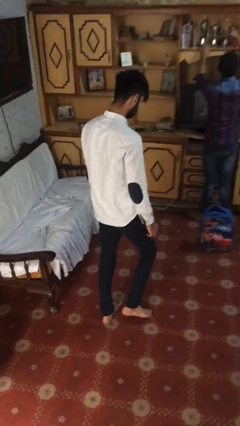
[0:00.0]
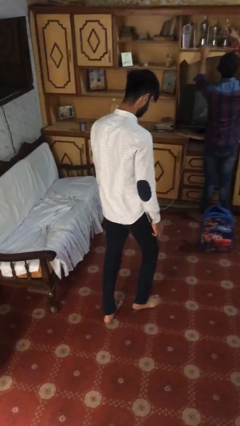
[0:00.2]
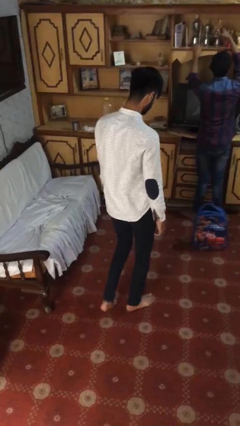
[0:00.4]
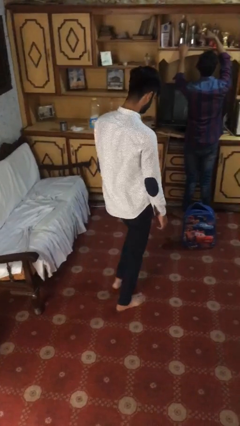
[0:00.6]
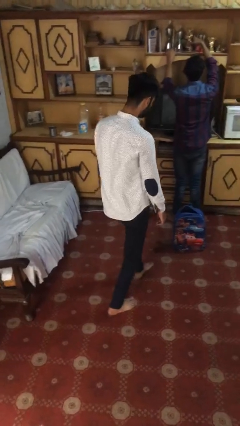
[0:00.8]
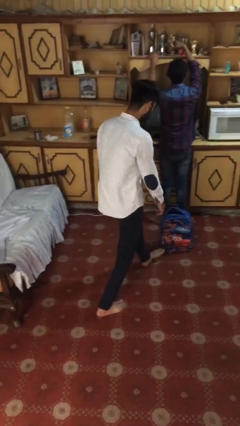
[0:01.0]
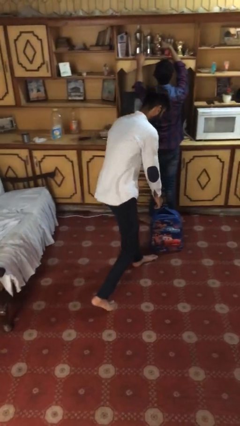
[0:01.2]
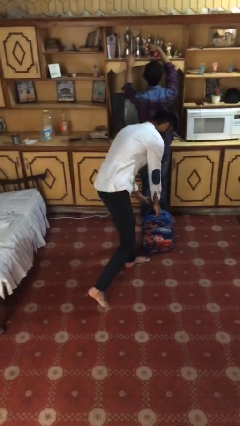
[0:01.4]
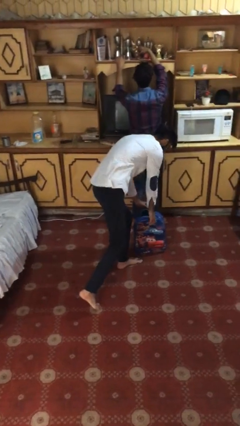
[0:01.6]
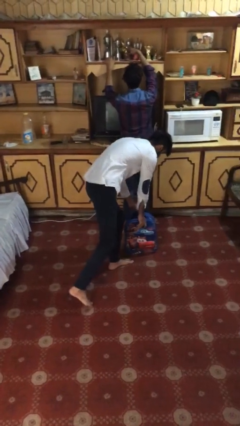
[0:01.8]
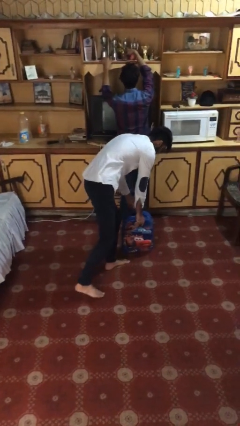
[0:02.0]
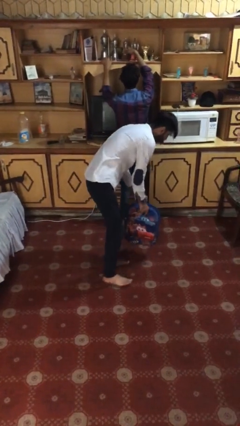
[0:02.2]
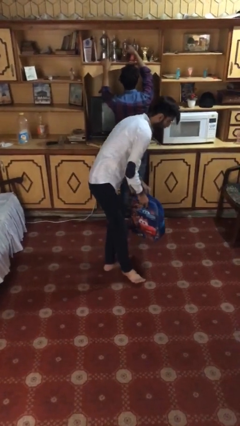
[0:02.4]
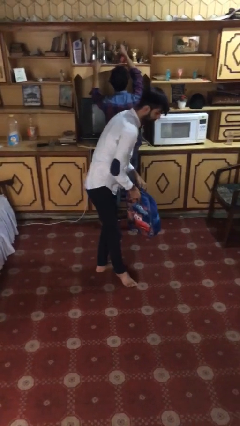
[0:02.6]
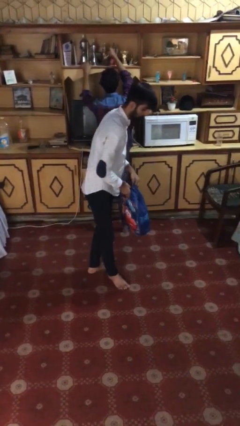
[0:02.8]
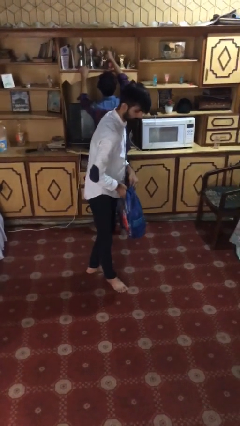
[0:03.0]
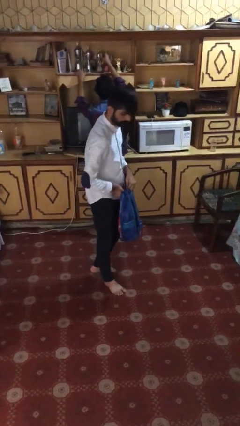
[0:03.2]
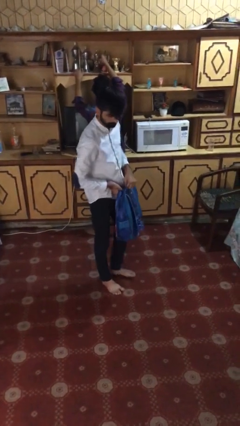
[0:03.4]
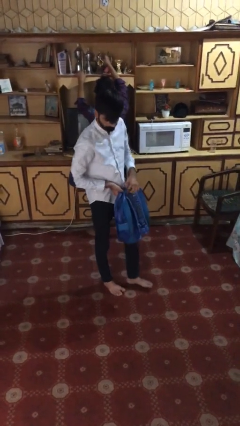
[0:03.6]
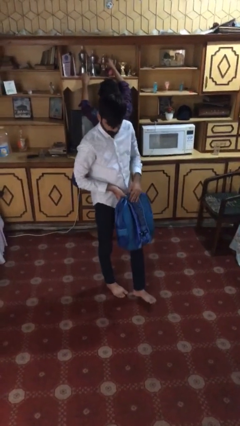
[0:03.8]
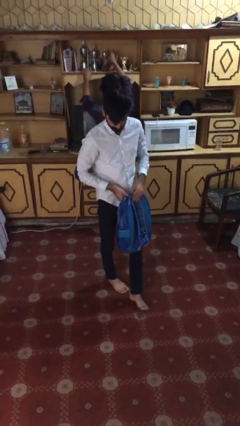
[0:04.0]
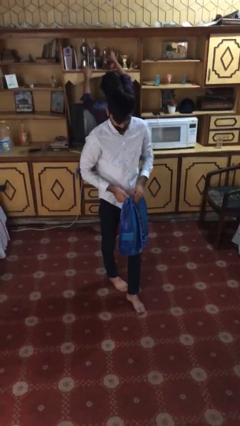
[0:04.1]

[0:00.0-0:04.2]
person steals object from person

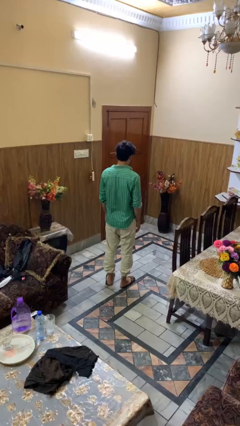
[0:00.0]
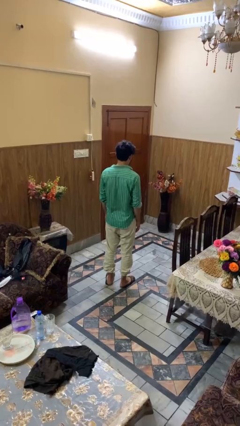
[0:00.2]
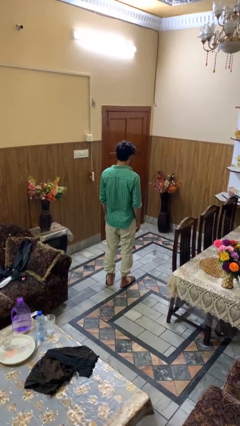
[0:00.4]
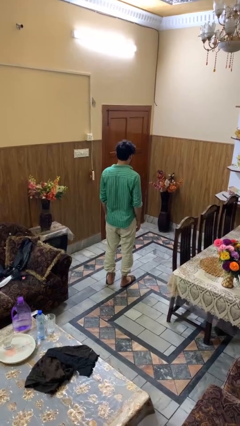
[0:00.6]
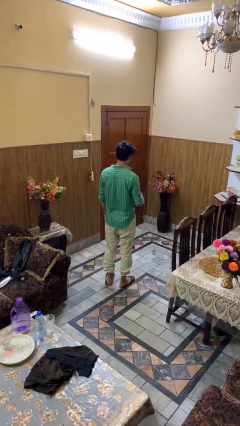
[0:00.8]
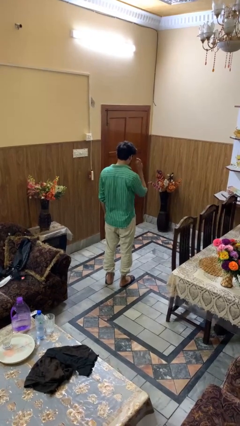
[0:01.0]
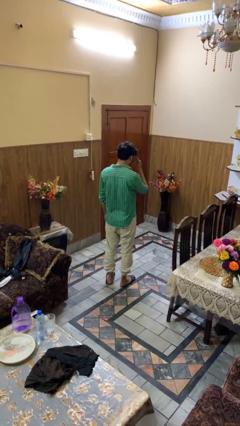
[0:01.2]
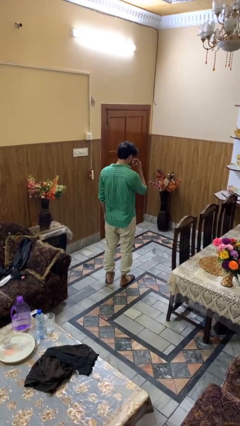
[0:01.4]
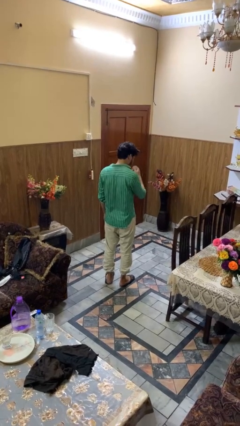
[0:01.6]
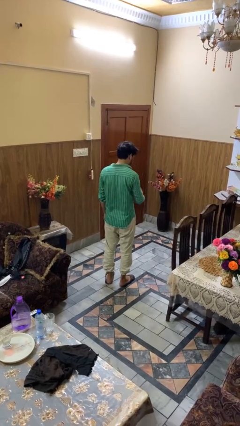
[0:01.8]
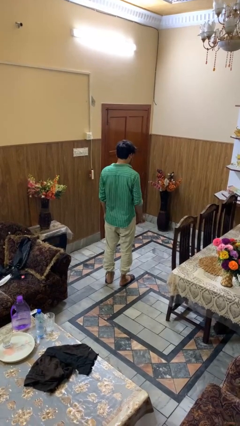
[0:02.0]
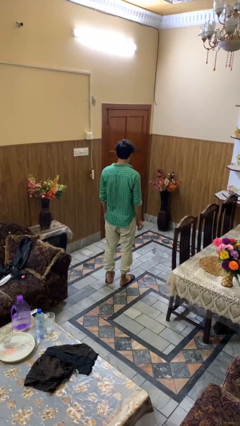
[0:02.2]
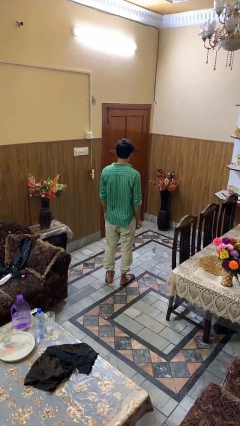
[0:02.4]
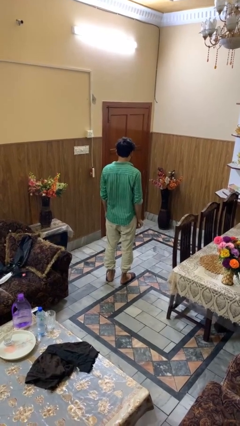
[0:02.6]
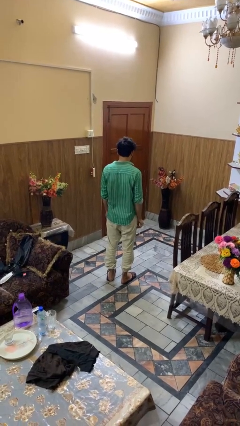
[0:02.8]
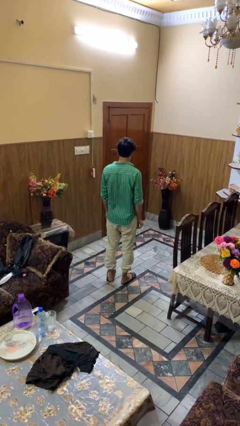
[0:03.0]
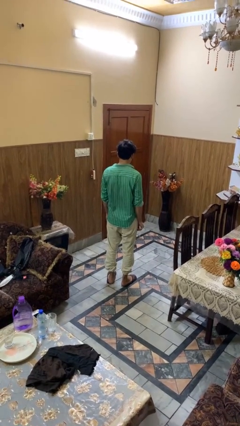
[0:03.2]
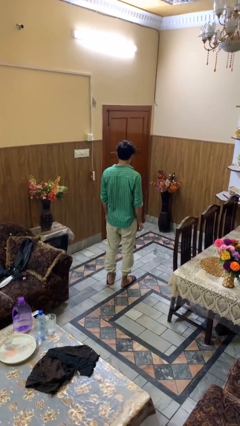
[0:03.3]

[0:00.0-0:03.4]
person takes off glasses

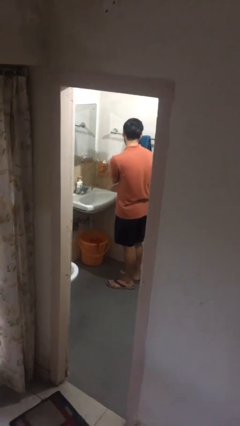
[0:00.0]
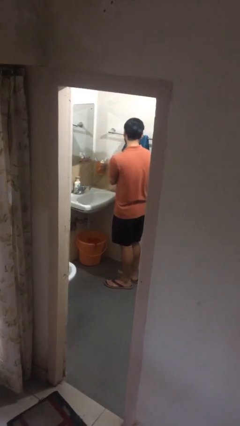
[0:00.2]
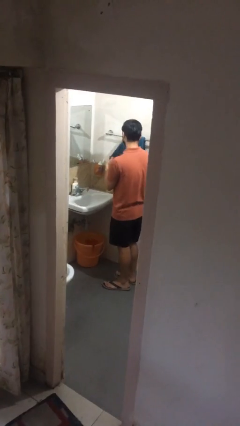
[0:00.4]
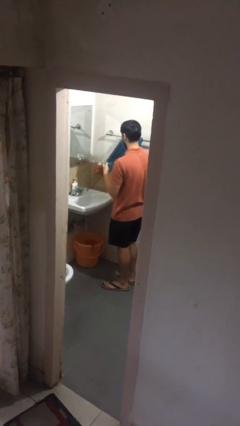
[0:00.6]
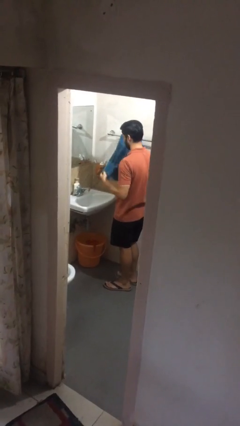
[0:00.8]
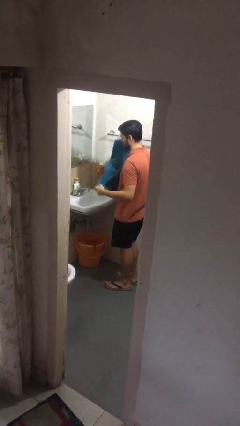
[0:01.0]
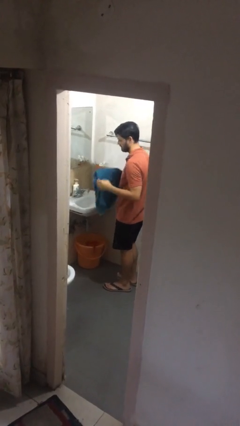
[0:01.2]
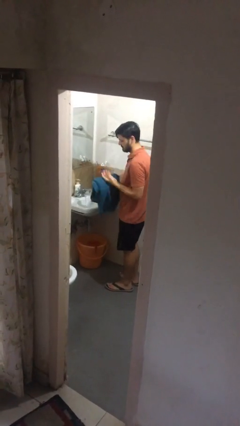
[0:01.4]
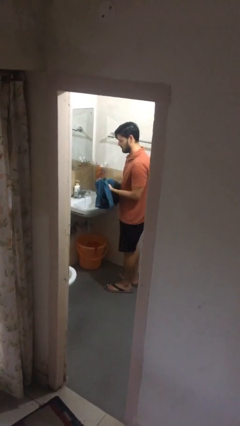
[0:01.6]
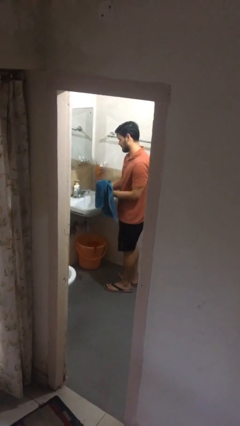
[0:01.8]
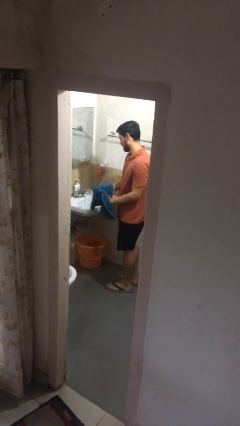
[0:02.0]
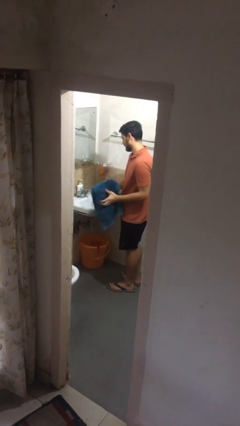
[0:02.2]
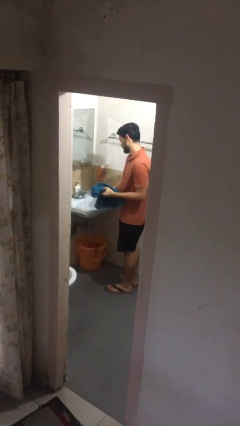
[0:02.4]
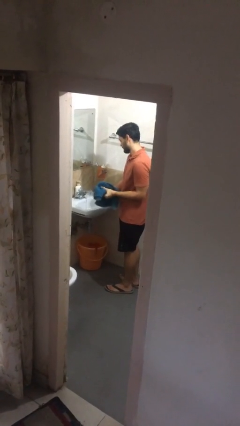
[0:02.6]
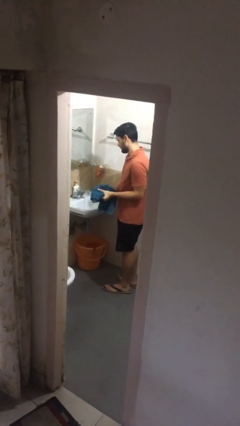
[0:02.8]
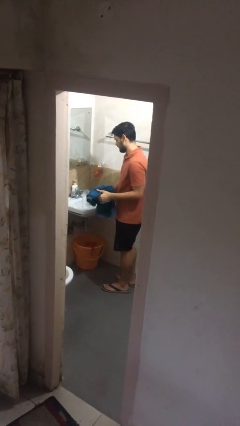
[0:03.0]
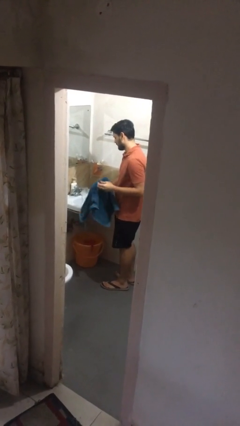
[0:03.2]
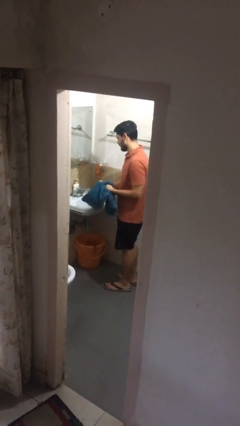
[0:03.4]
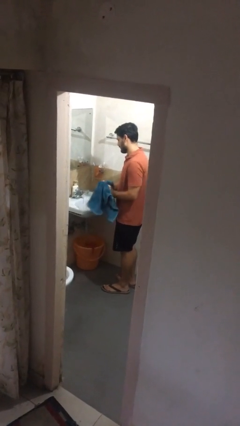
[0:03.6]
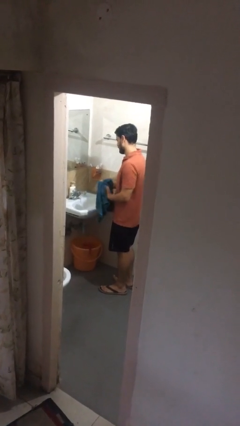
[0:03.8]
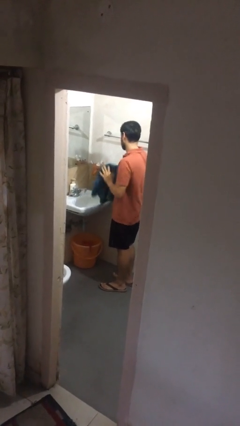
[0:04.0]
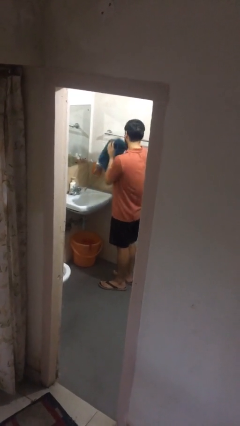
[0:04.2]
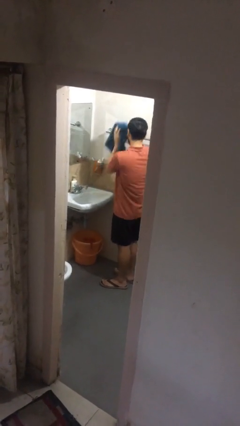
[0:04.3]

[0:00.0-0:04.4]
person dries hands with towel

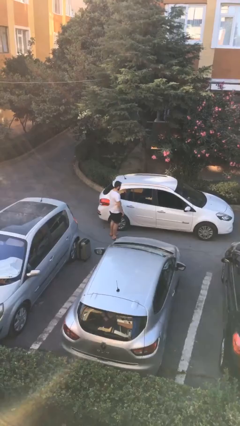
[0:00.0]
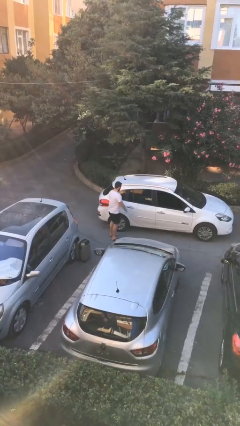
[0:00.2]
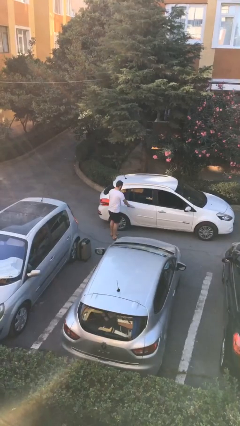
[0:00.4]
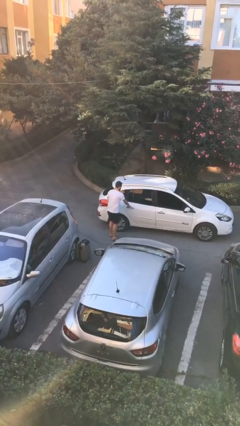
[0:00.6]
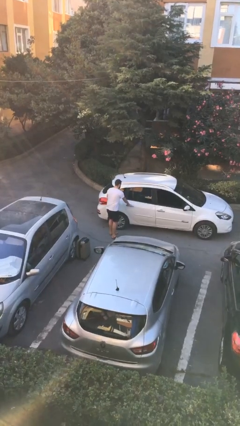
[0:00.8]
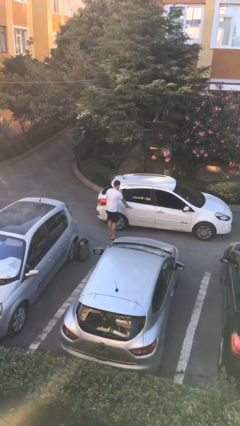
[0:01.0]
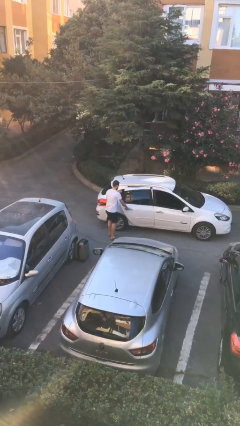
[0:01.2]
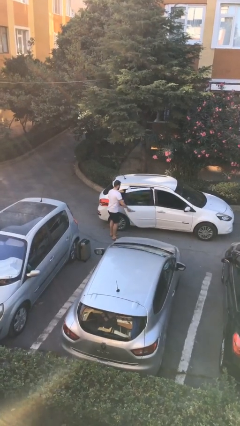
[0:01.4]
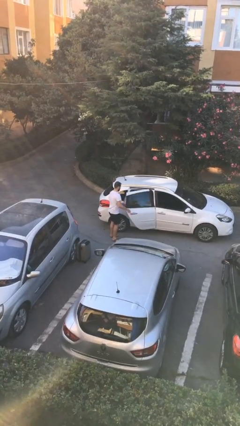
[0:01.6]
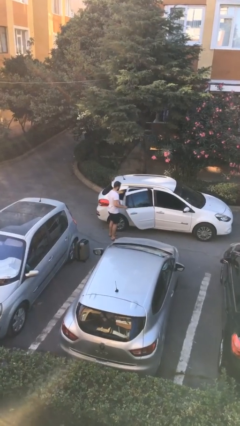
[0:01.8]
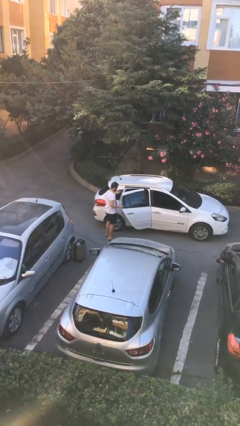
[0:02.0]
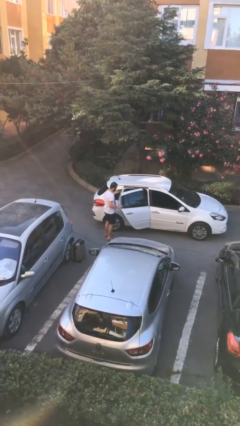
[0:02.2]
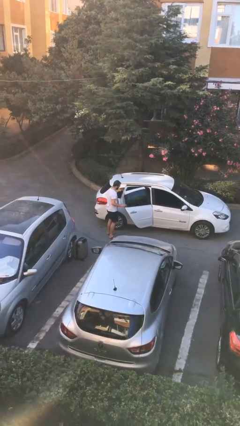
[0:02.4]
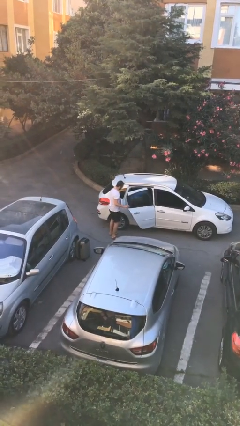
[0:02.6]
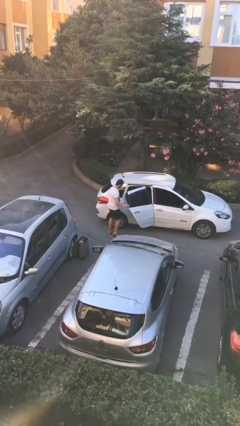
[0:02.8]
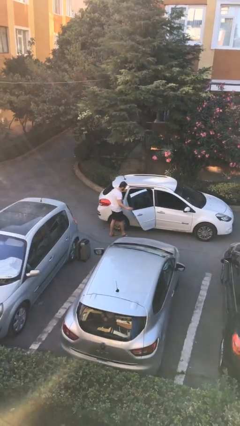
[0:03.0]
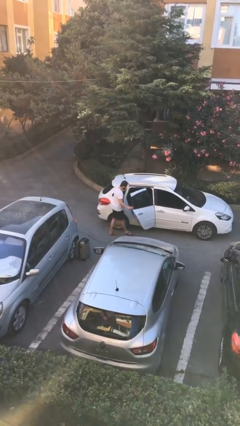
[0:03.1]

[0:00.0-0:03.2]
person opens car door

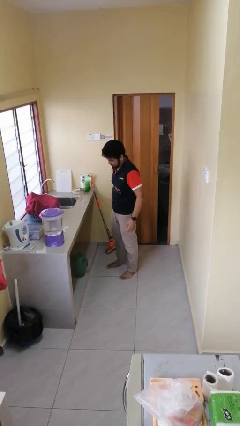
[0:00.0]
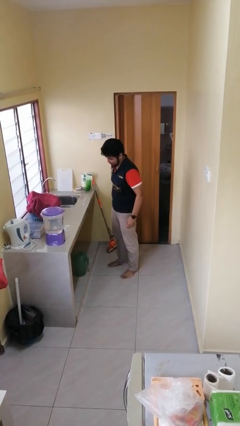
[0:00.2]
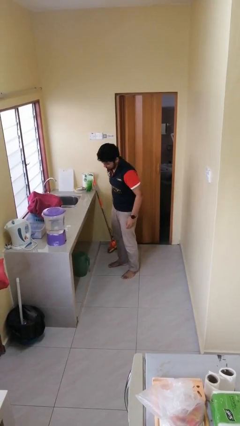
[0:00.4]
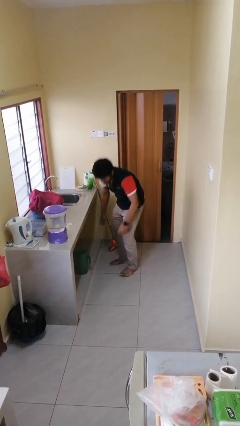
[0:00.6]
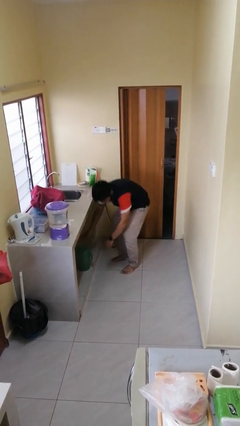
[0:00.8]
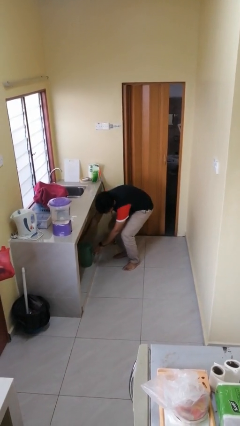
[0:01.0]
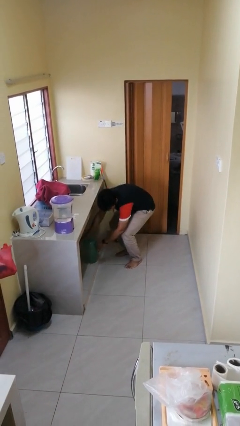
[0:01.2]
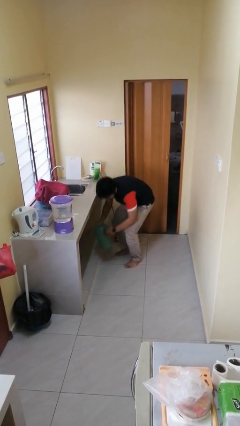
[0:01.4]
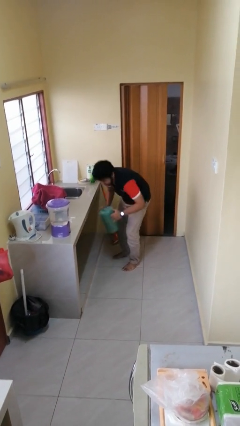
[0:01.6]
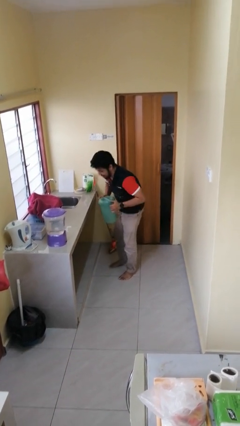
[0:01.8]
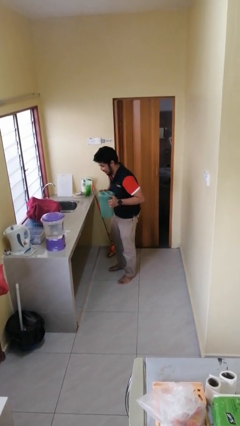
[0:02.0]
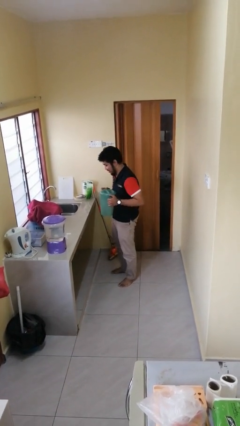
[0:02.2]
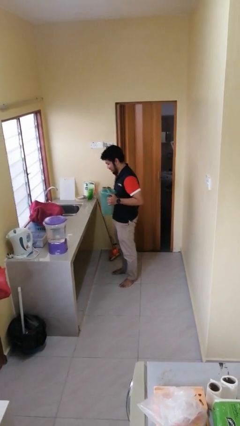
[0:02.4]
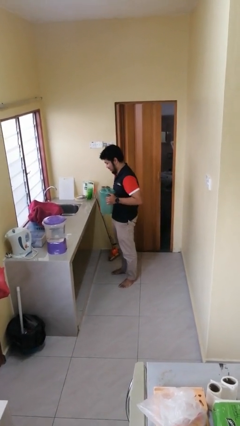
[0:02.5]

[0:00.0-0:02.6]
person picks up object from cabinet
